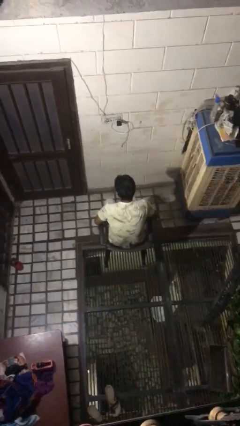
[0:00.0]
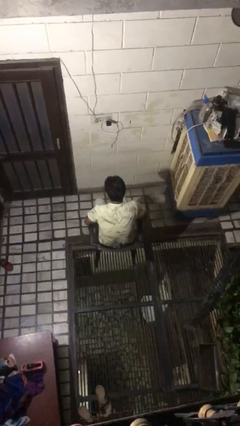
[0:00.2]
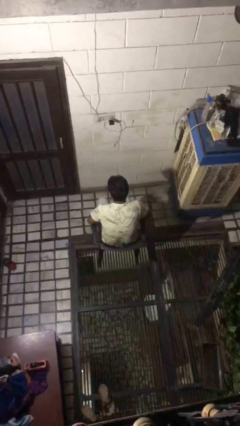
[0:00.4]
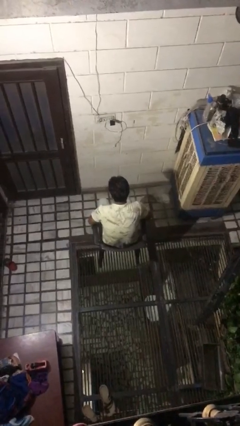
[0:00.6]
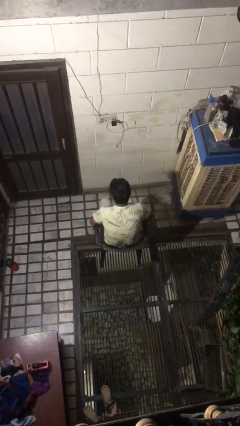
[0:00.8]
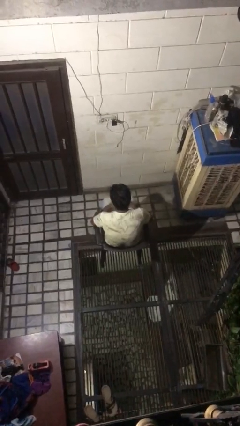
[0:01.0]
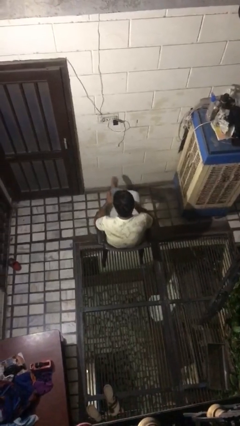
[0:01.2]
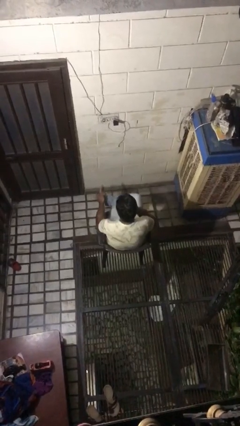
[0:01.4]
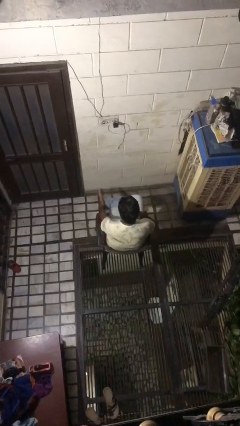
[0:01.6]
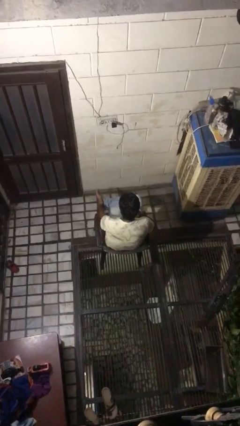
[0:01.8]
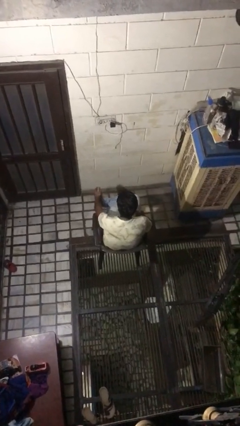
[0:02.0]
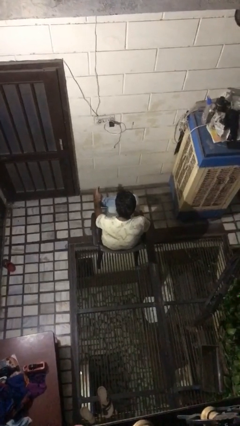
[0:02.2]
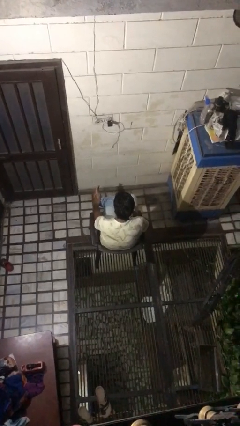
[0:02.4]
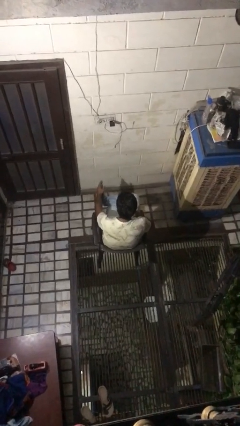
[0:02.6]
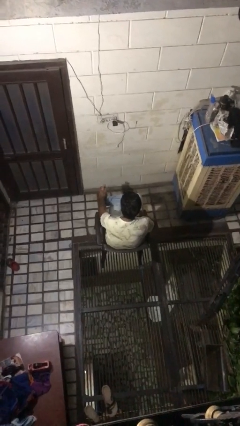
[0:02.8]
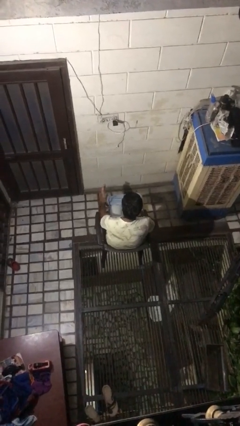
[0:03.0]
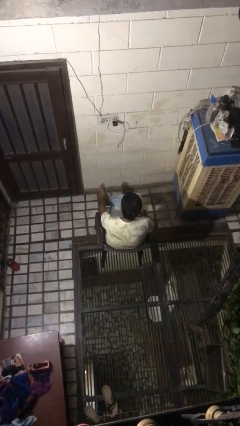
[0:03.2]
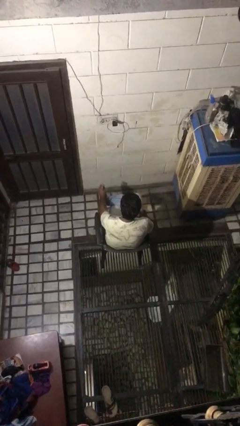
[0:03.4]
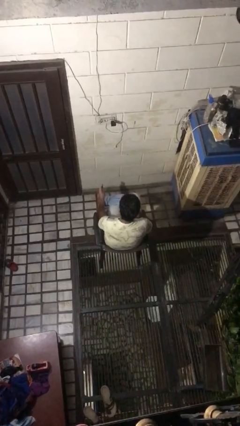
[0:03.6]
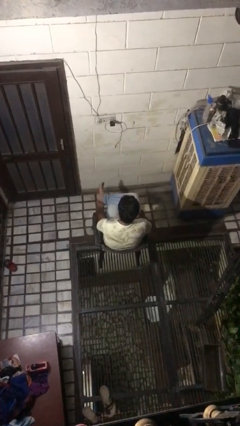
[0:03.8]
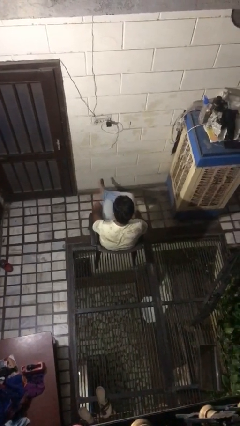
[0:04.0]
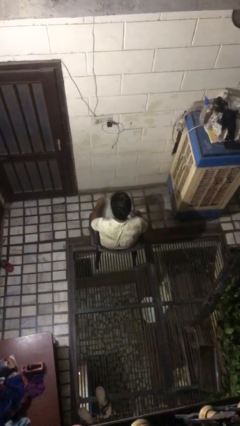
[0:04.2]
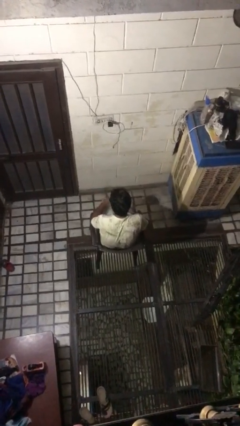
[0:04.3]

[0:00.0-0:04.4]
person rubs foot

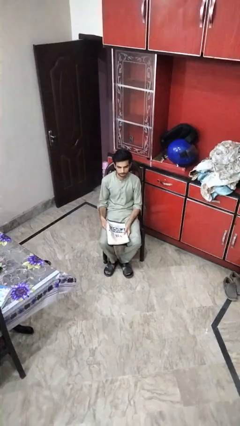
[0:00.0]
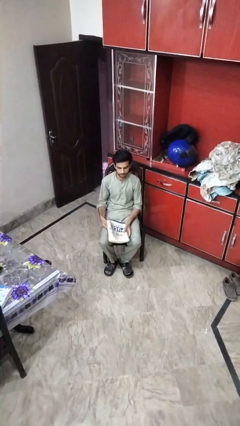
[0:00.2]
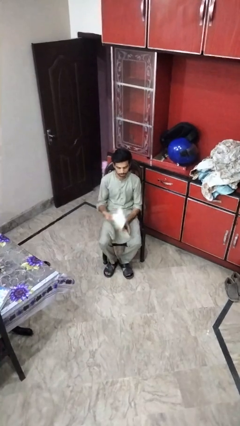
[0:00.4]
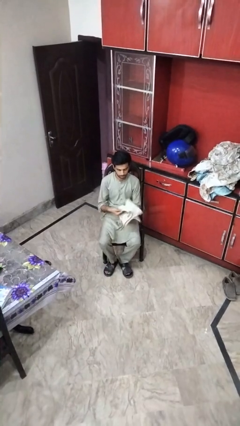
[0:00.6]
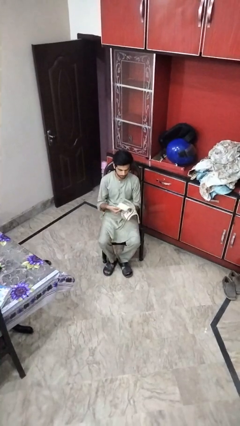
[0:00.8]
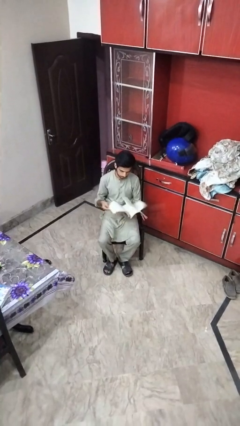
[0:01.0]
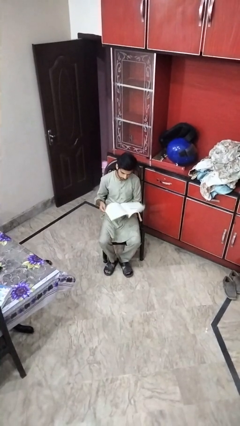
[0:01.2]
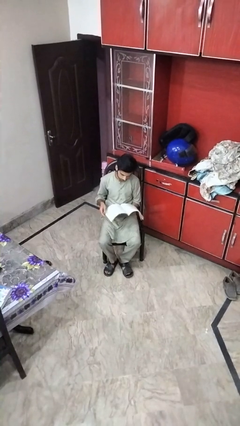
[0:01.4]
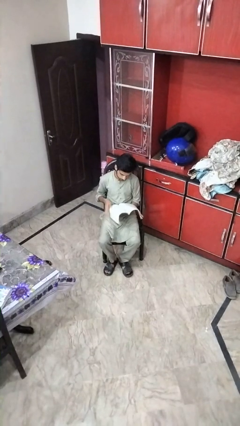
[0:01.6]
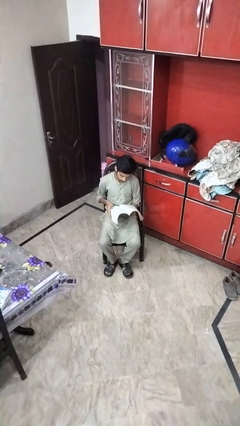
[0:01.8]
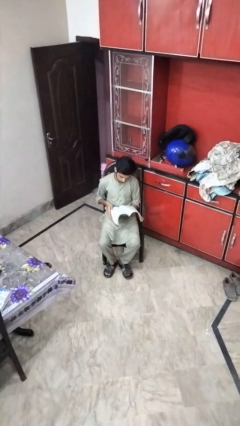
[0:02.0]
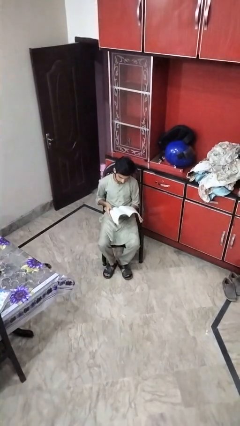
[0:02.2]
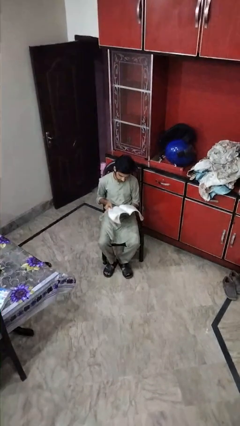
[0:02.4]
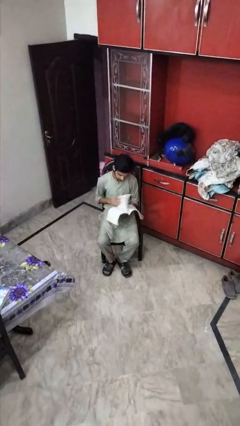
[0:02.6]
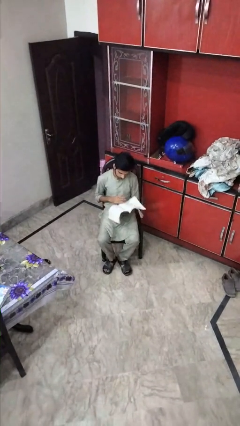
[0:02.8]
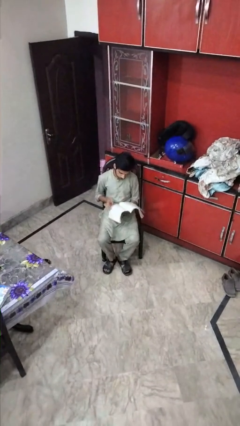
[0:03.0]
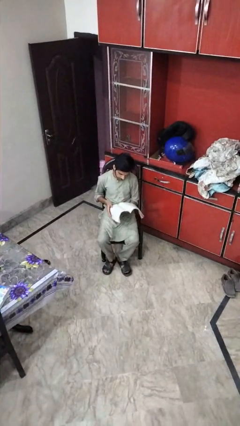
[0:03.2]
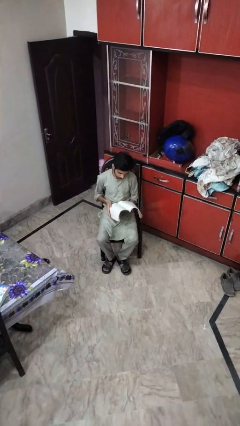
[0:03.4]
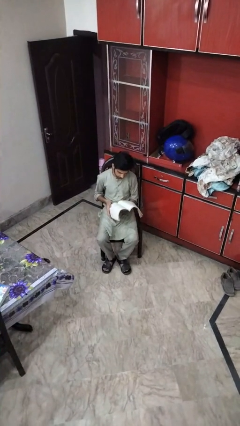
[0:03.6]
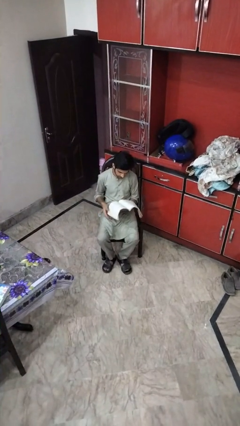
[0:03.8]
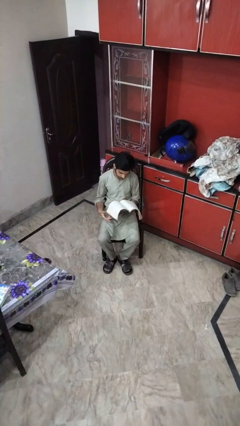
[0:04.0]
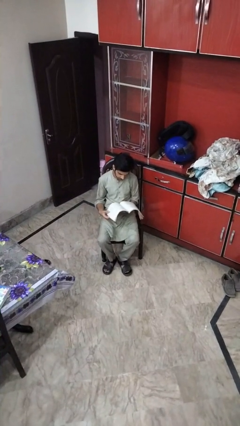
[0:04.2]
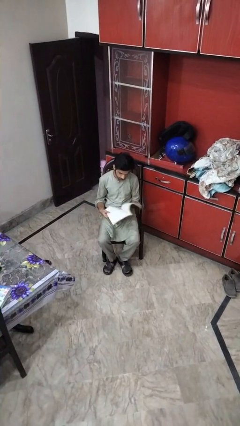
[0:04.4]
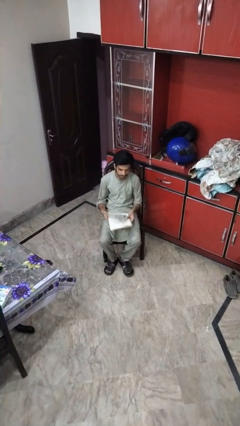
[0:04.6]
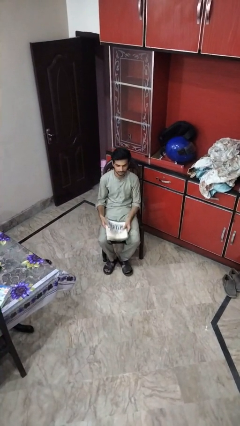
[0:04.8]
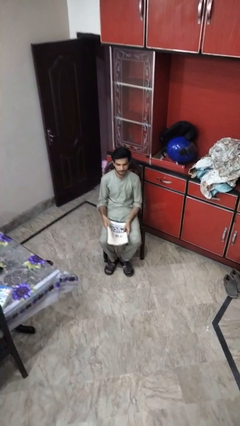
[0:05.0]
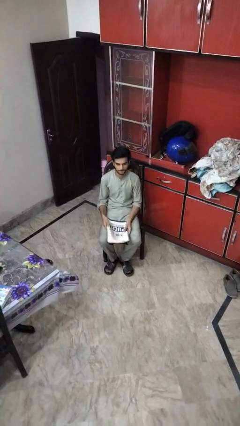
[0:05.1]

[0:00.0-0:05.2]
person reads magazine

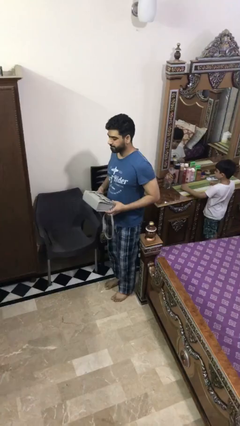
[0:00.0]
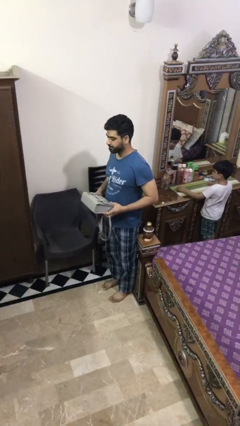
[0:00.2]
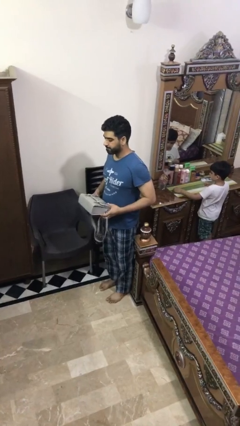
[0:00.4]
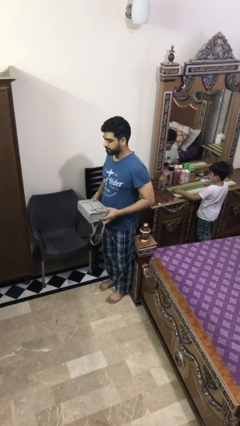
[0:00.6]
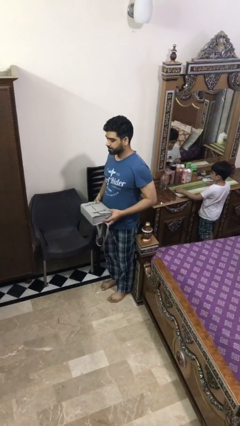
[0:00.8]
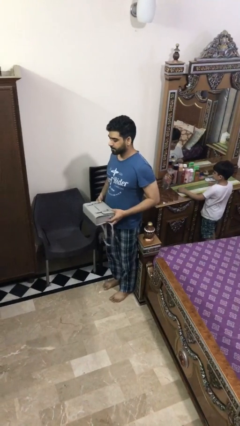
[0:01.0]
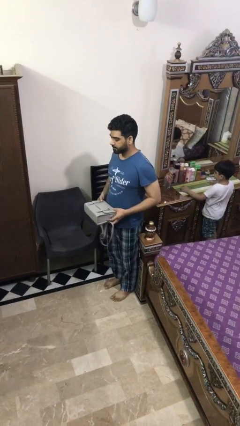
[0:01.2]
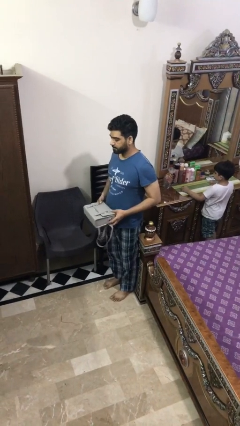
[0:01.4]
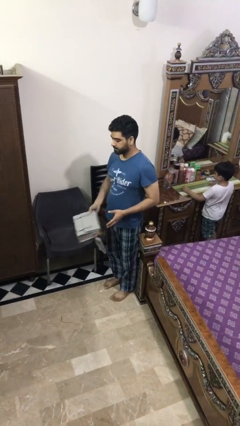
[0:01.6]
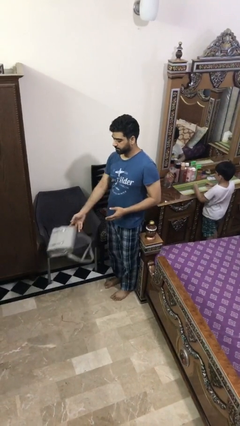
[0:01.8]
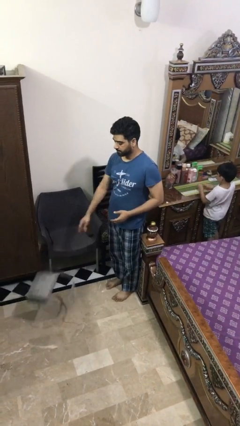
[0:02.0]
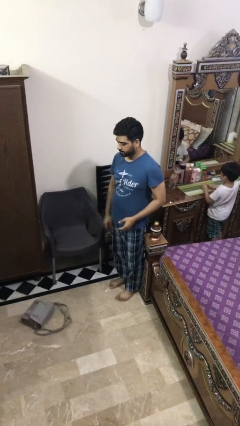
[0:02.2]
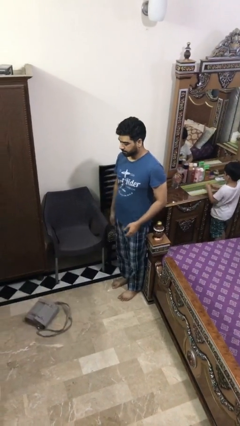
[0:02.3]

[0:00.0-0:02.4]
person throws object to ground

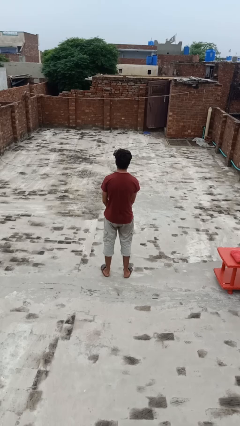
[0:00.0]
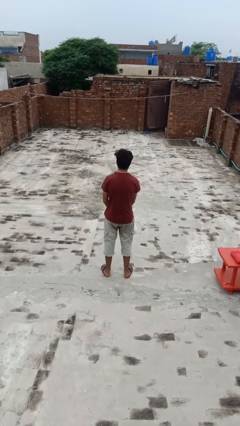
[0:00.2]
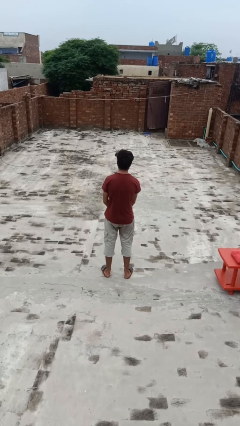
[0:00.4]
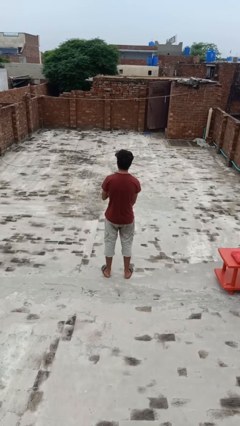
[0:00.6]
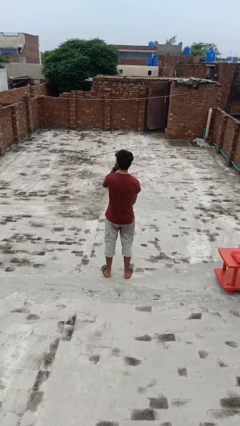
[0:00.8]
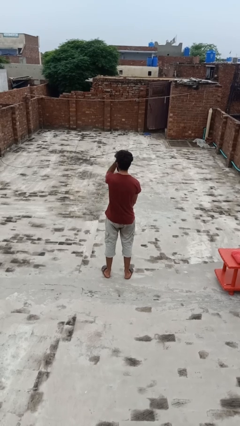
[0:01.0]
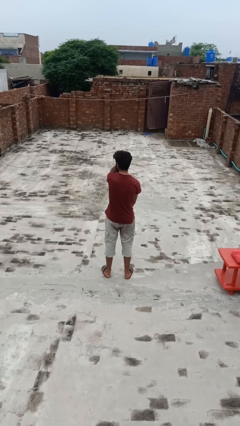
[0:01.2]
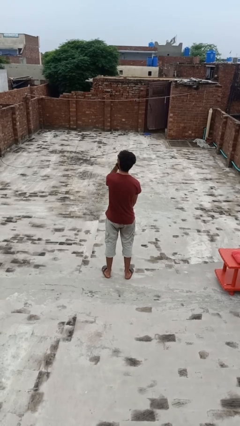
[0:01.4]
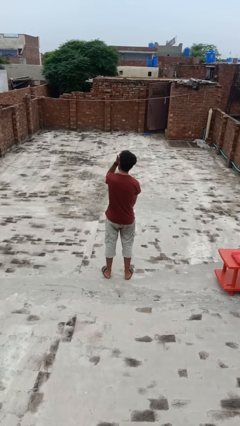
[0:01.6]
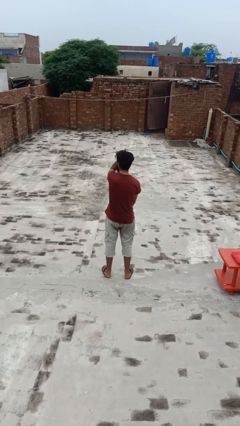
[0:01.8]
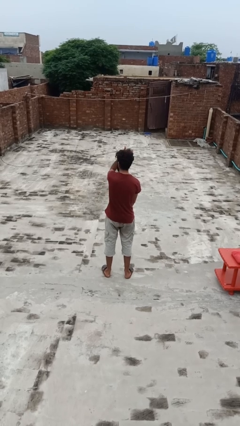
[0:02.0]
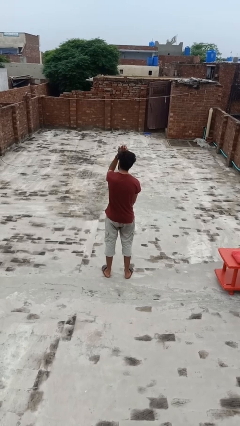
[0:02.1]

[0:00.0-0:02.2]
person strokes hair

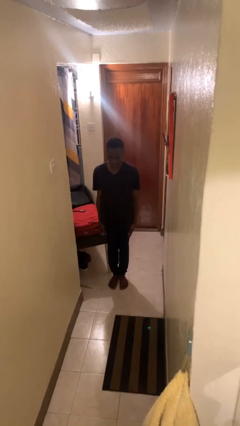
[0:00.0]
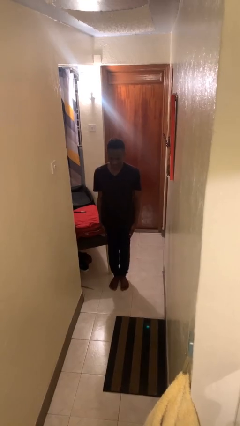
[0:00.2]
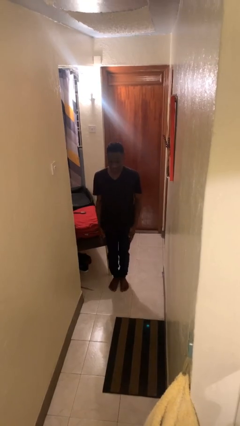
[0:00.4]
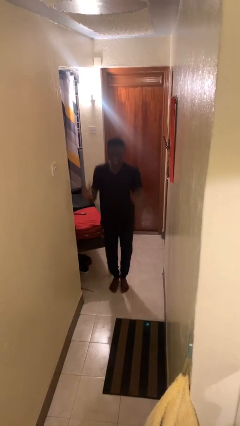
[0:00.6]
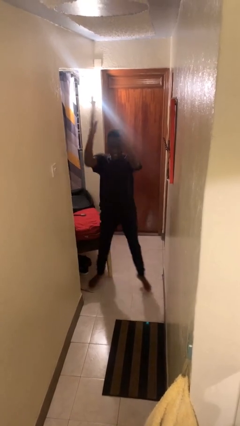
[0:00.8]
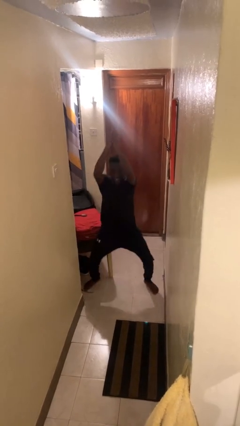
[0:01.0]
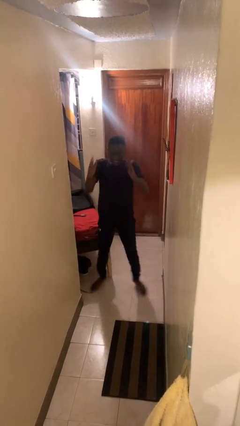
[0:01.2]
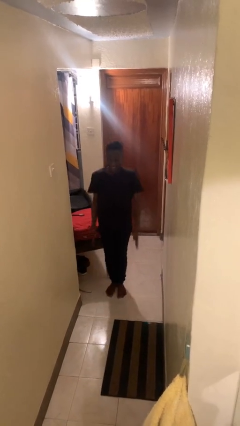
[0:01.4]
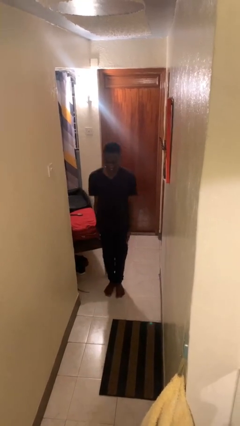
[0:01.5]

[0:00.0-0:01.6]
person exercises with jumping jacks

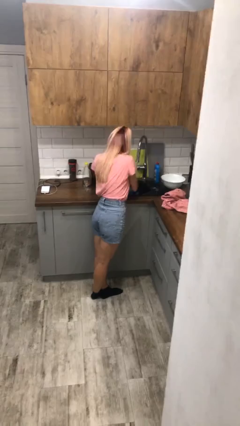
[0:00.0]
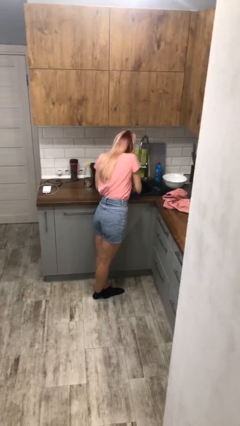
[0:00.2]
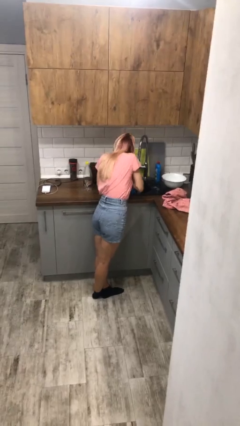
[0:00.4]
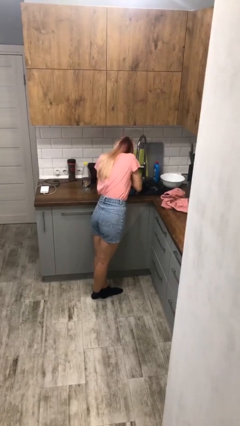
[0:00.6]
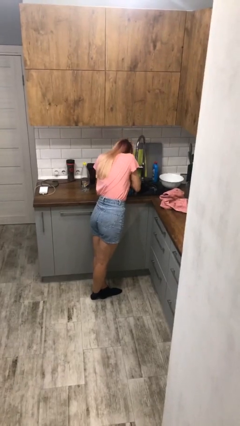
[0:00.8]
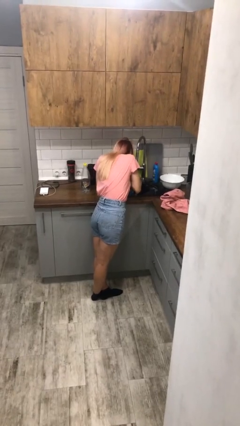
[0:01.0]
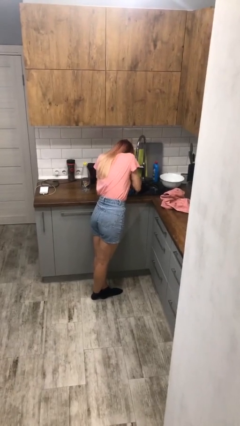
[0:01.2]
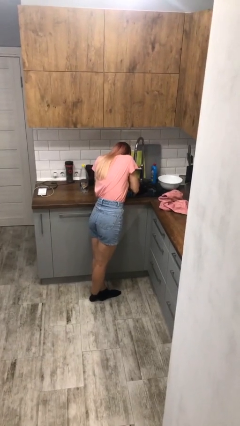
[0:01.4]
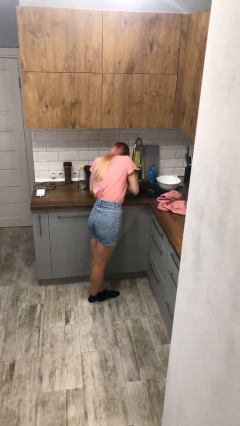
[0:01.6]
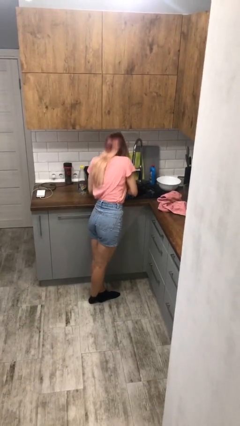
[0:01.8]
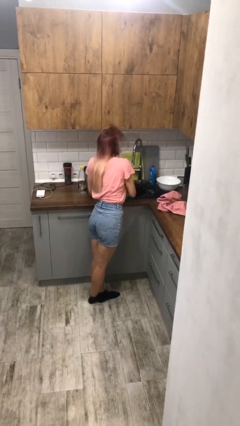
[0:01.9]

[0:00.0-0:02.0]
person washes face
